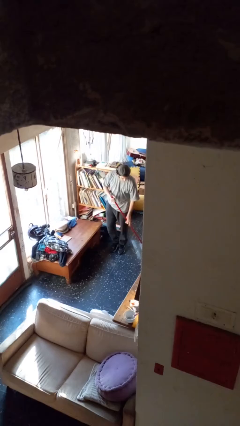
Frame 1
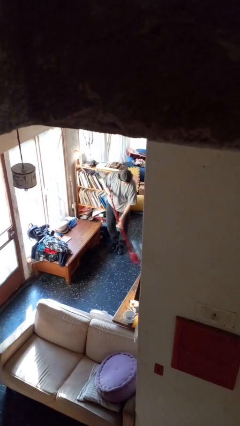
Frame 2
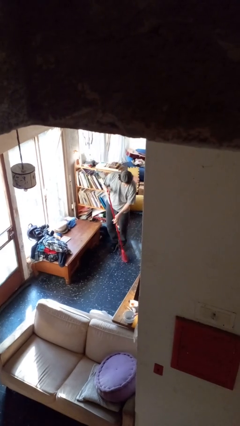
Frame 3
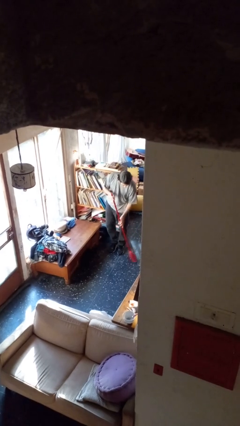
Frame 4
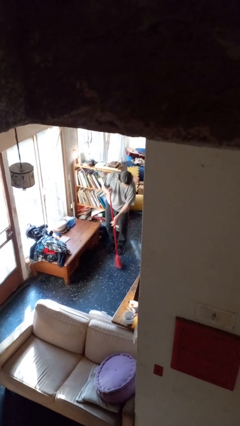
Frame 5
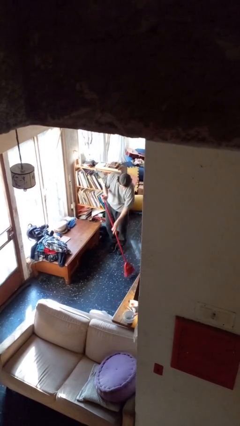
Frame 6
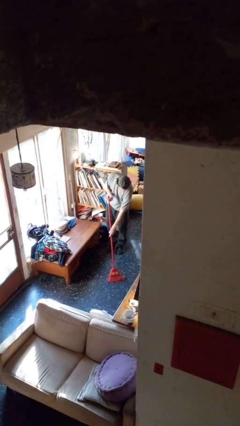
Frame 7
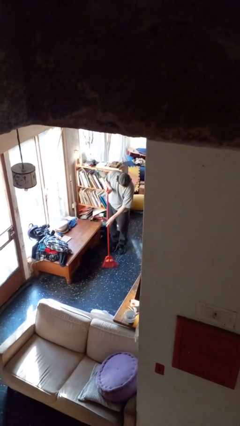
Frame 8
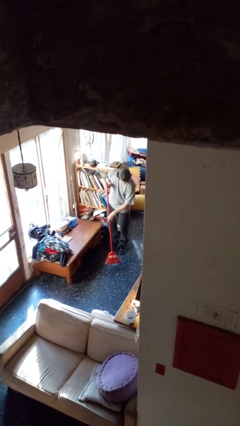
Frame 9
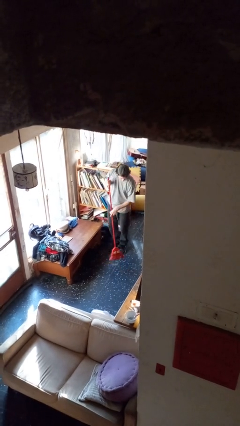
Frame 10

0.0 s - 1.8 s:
person sweeps floor

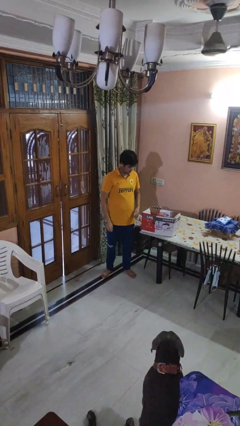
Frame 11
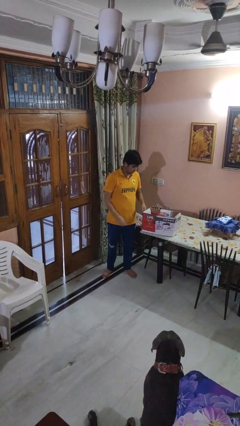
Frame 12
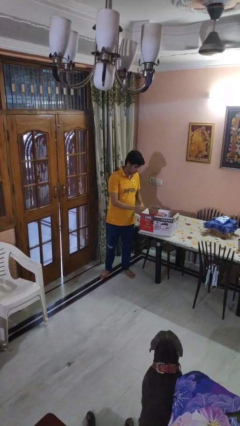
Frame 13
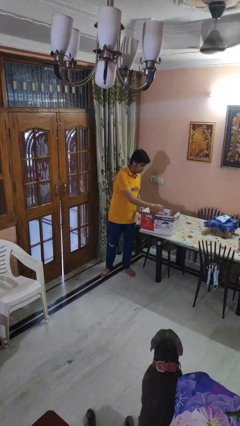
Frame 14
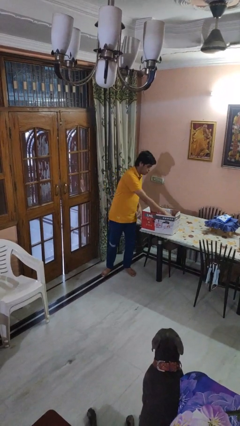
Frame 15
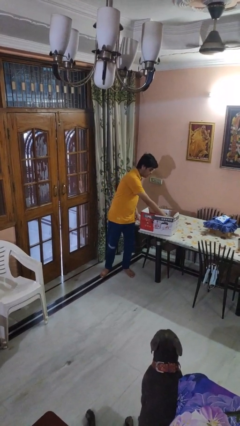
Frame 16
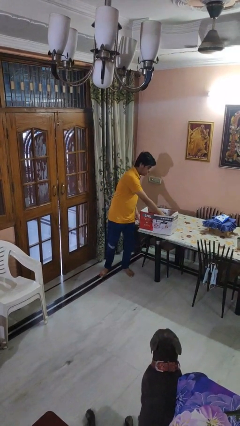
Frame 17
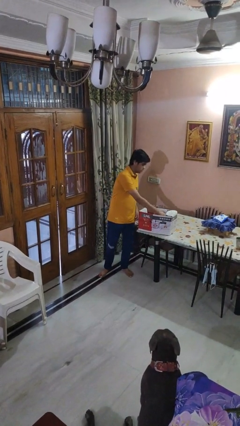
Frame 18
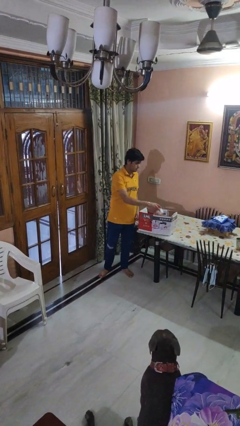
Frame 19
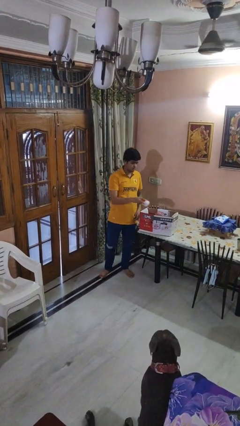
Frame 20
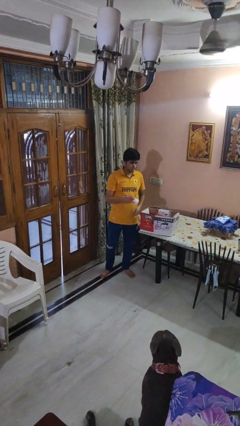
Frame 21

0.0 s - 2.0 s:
person takes object from box

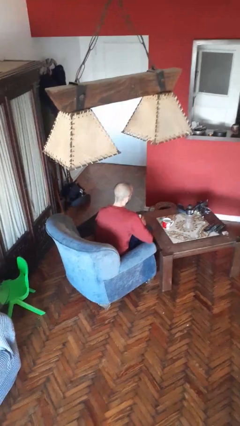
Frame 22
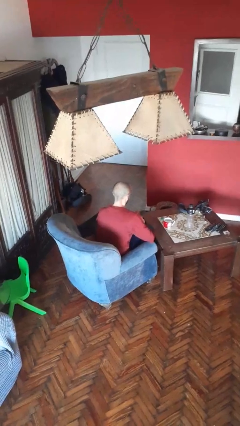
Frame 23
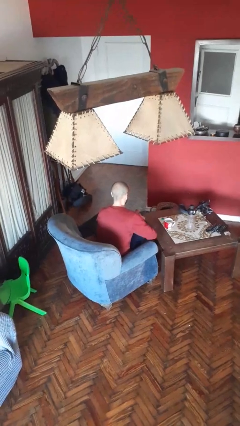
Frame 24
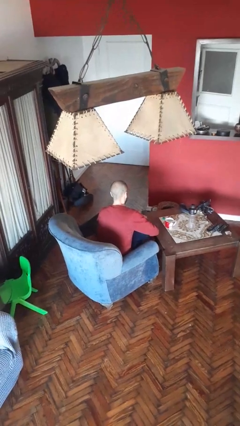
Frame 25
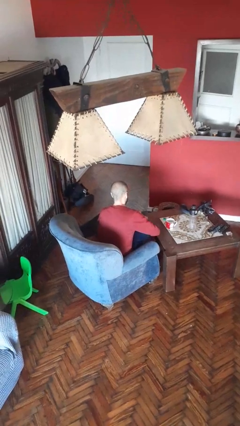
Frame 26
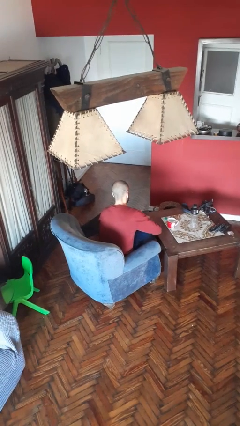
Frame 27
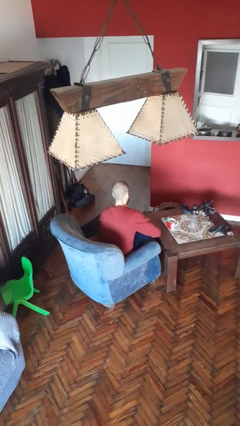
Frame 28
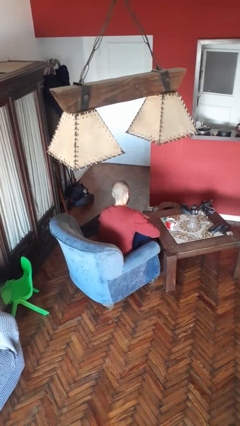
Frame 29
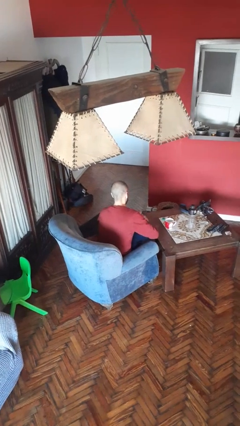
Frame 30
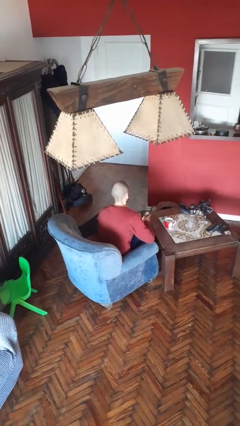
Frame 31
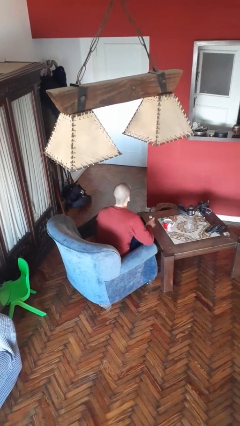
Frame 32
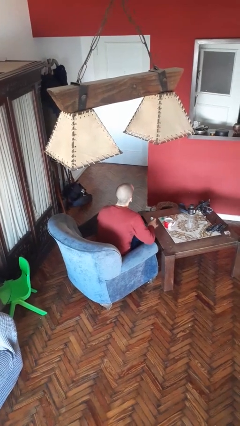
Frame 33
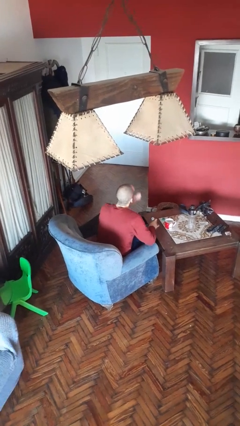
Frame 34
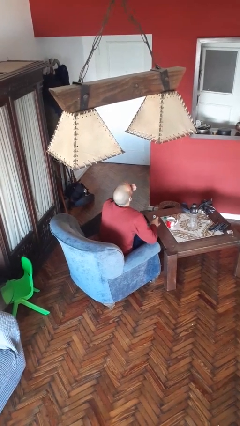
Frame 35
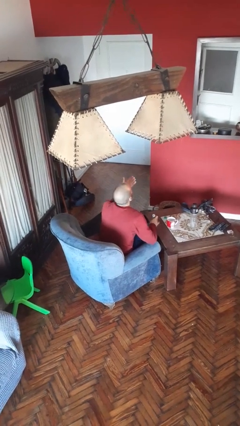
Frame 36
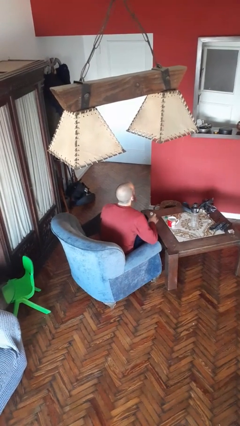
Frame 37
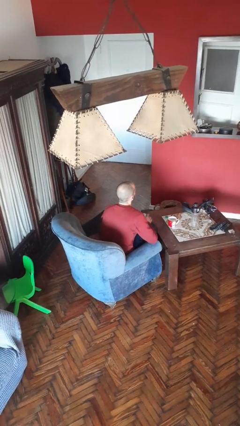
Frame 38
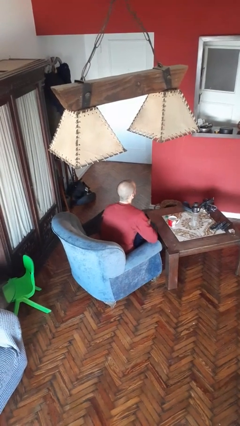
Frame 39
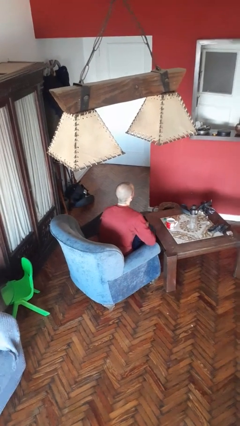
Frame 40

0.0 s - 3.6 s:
person takes medicine pills

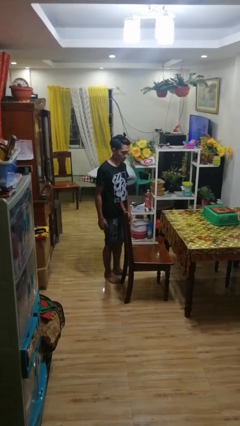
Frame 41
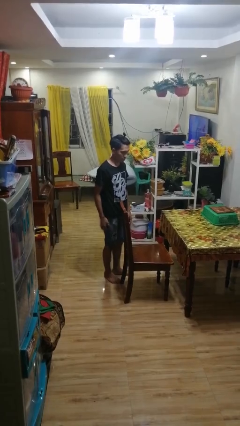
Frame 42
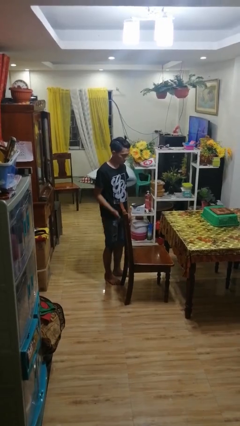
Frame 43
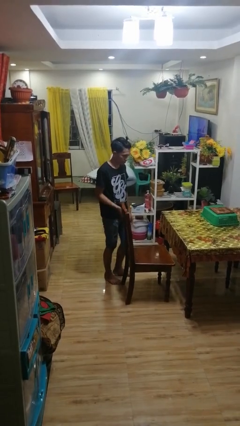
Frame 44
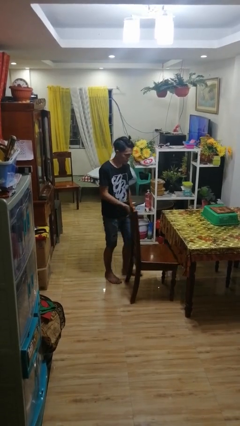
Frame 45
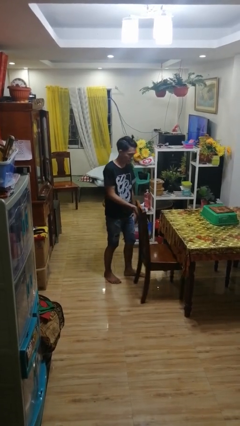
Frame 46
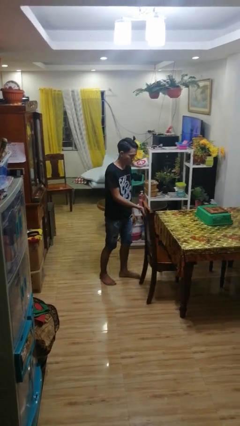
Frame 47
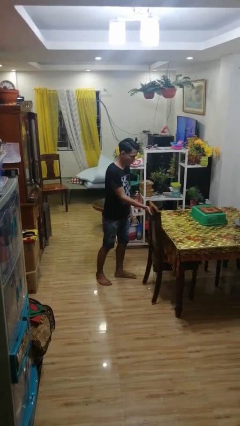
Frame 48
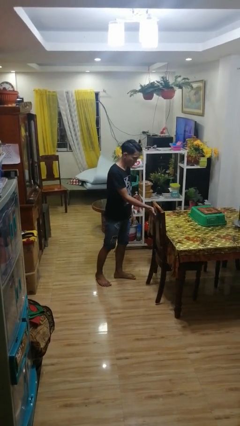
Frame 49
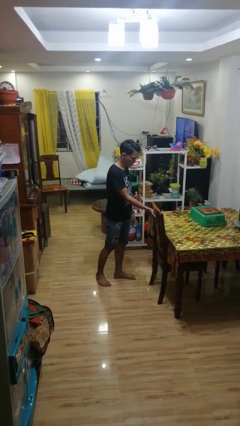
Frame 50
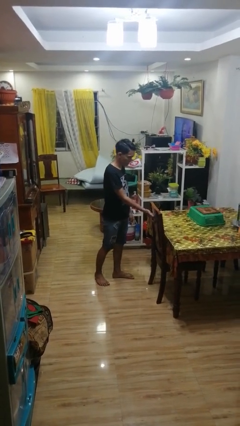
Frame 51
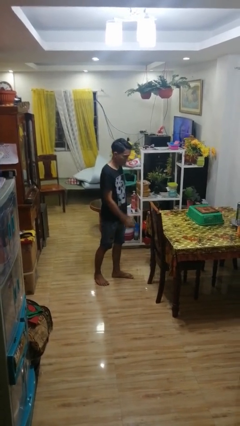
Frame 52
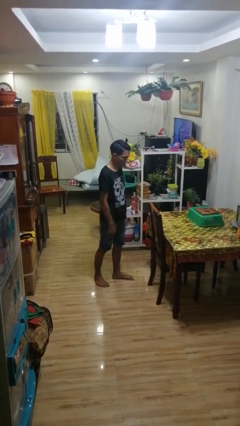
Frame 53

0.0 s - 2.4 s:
person pushes in chair

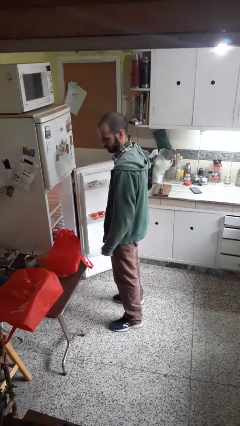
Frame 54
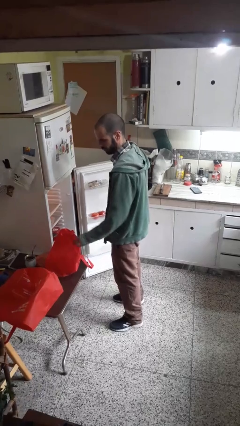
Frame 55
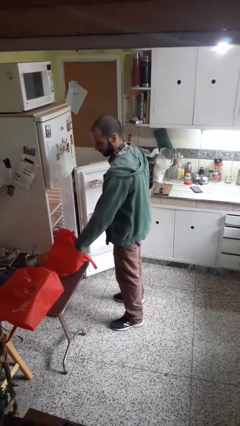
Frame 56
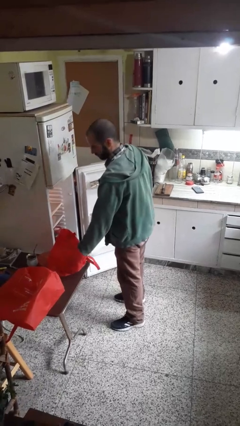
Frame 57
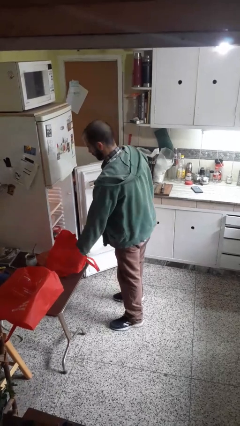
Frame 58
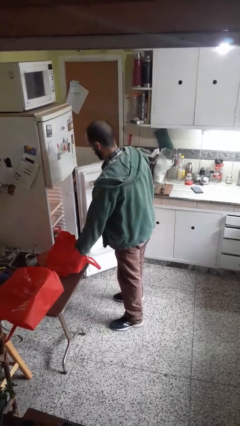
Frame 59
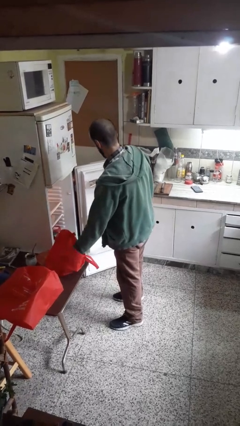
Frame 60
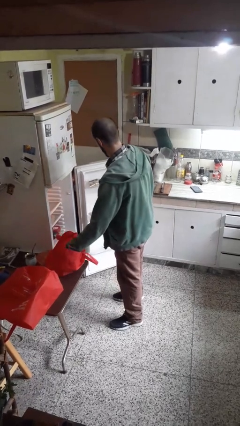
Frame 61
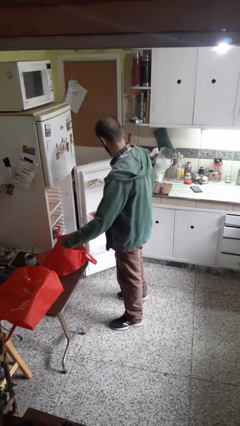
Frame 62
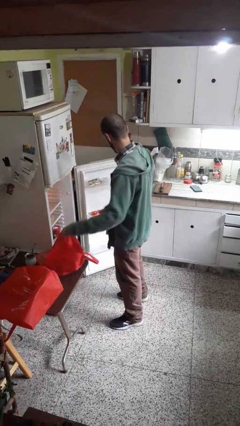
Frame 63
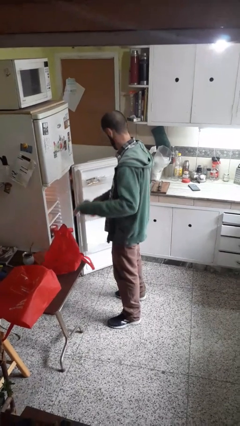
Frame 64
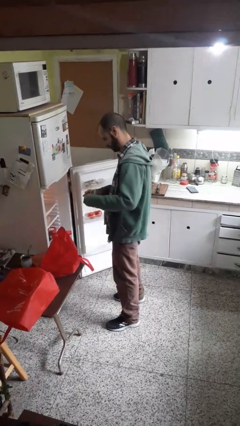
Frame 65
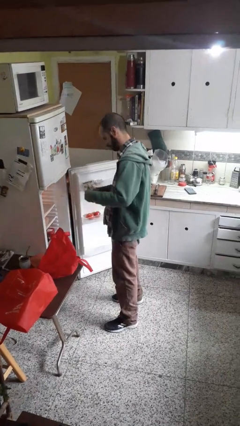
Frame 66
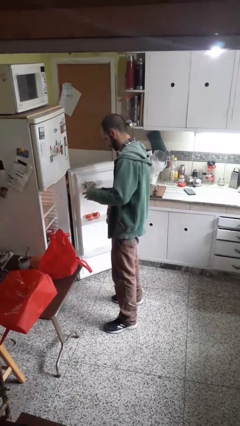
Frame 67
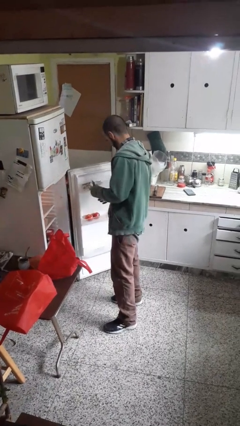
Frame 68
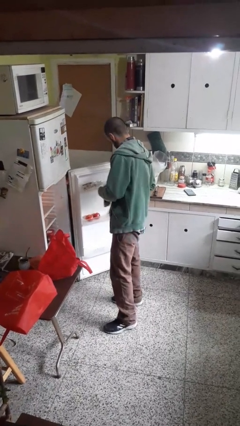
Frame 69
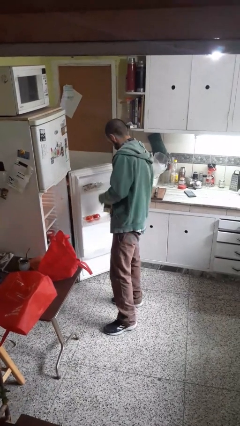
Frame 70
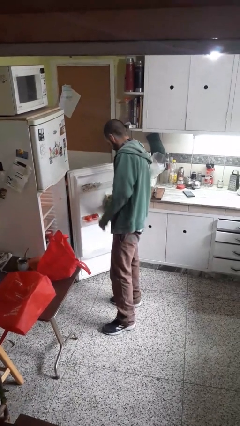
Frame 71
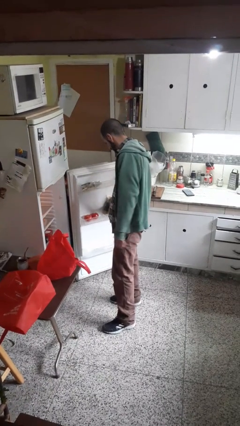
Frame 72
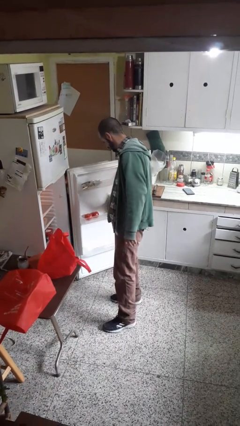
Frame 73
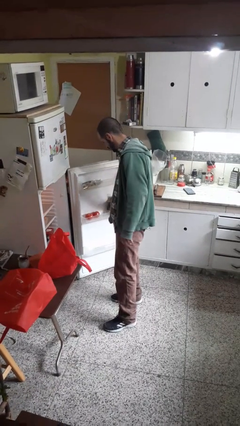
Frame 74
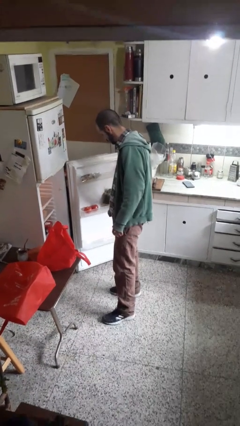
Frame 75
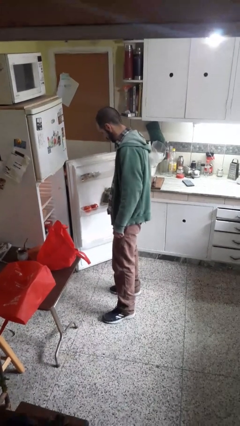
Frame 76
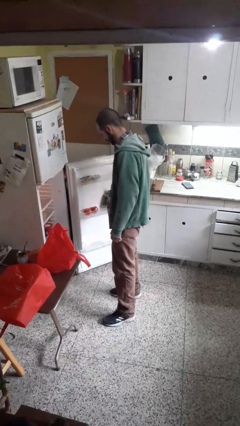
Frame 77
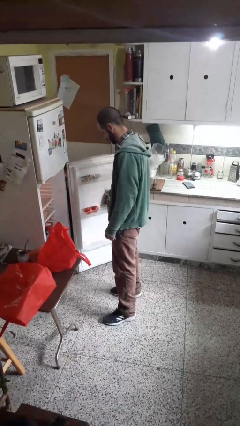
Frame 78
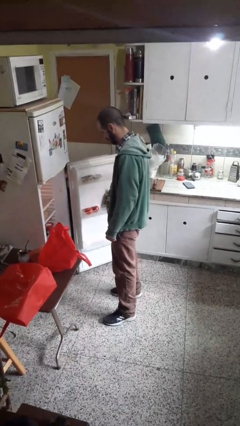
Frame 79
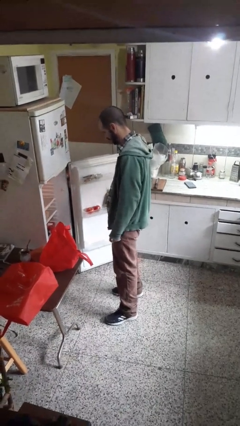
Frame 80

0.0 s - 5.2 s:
person loads groceries into refrigerator

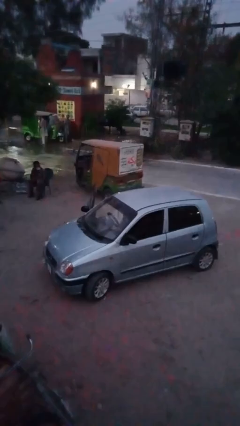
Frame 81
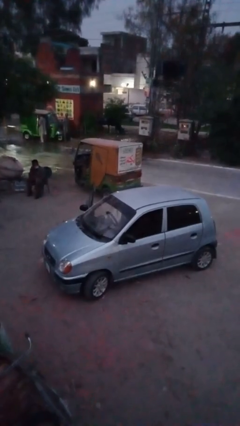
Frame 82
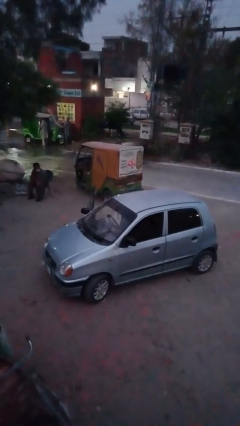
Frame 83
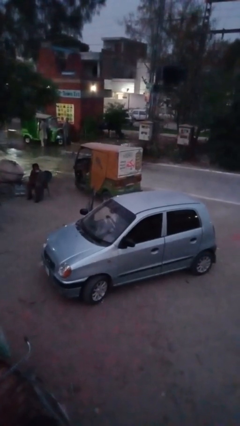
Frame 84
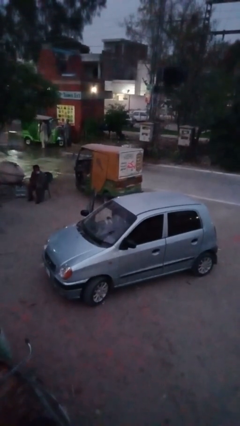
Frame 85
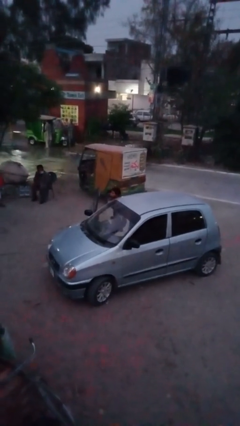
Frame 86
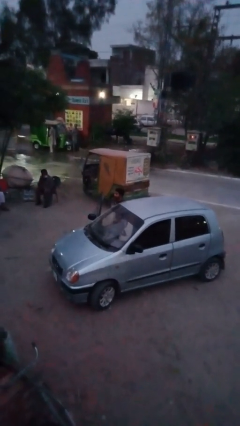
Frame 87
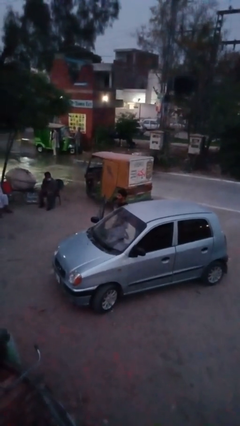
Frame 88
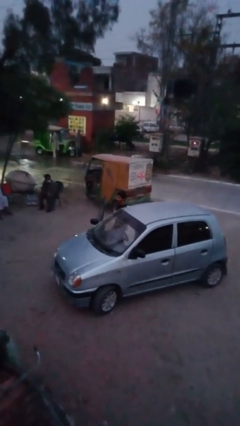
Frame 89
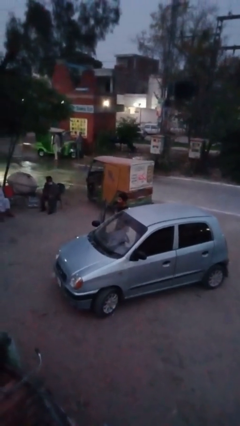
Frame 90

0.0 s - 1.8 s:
person exits car

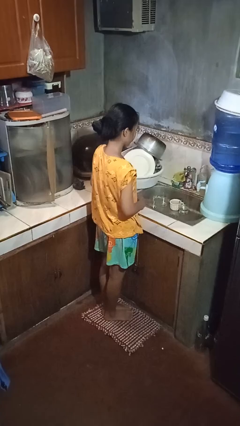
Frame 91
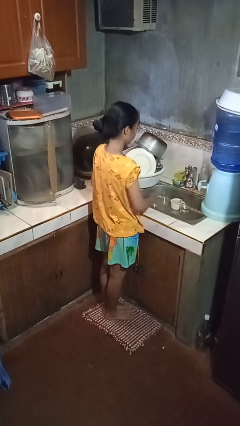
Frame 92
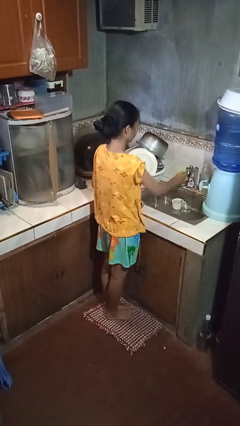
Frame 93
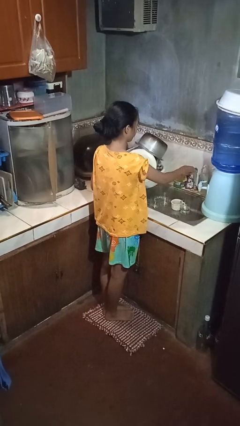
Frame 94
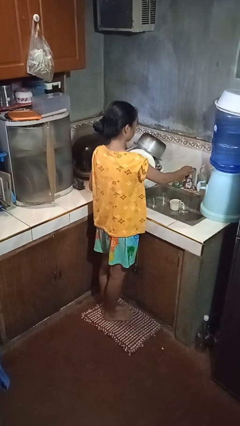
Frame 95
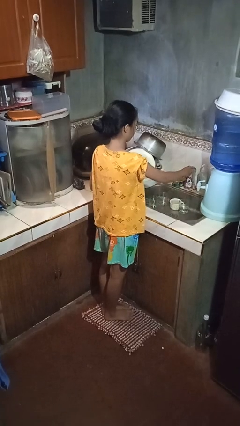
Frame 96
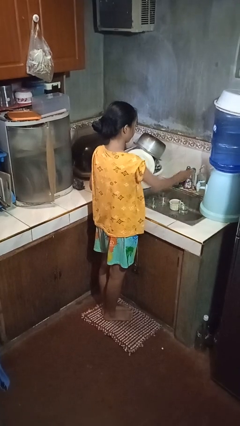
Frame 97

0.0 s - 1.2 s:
person turns on faucet
